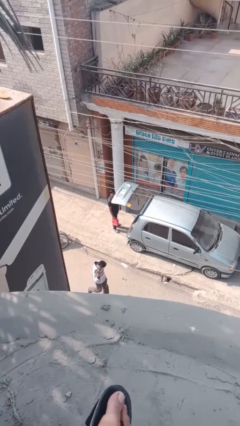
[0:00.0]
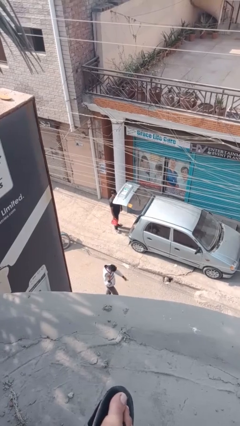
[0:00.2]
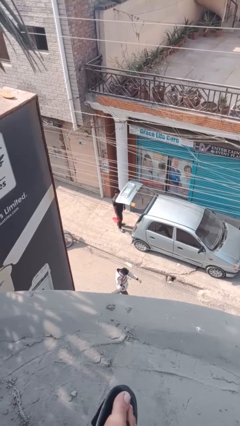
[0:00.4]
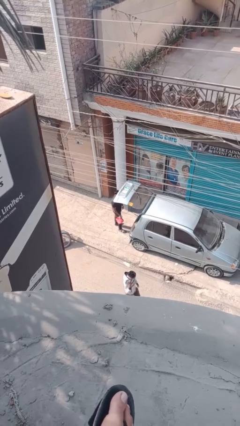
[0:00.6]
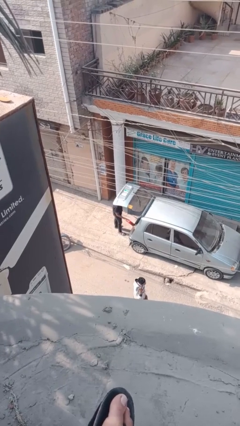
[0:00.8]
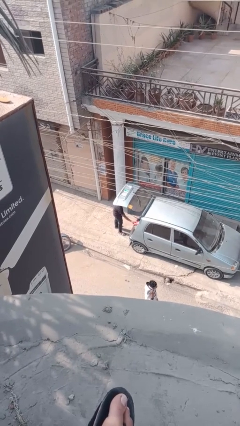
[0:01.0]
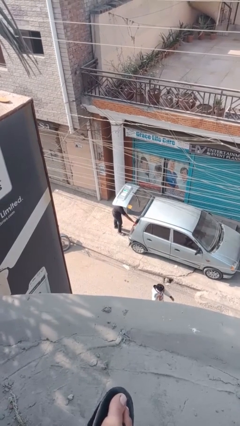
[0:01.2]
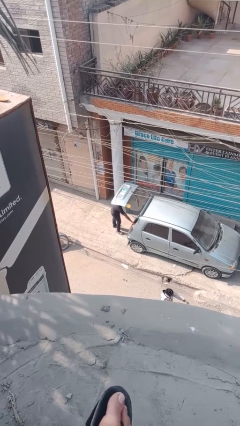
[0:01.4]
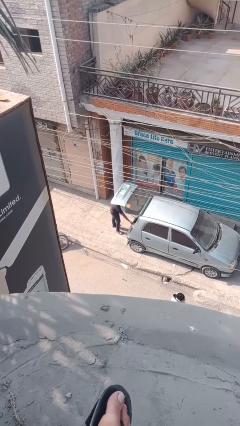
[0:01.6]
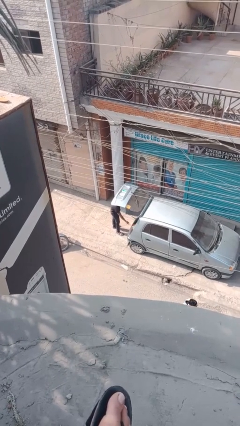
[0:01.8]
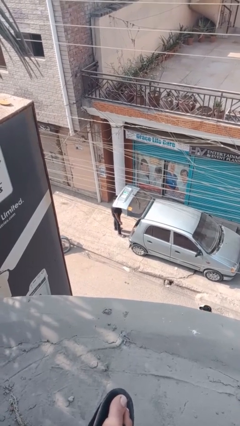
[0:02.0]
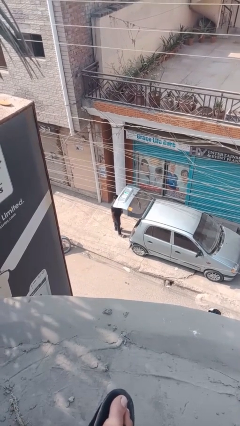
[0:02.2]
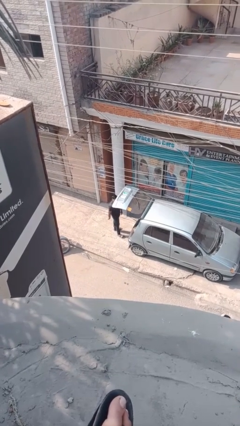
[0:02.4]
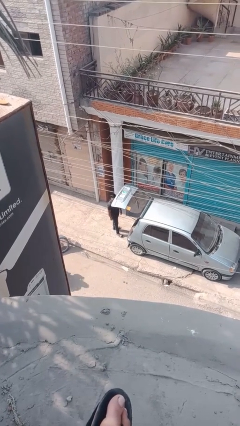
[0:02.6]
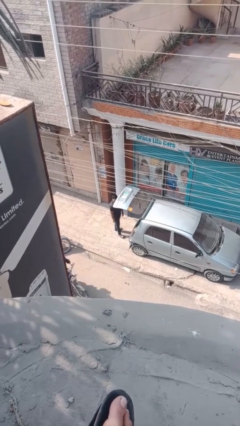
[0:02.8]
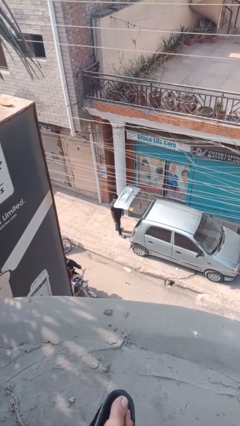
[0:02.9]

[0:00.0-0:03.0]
person loads car

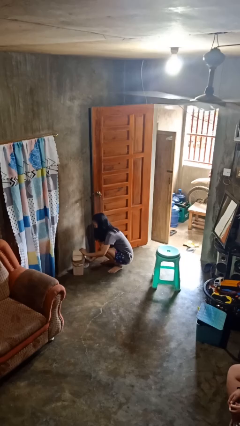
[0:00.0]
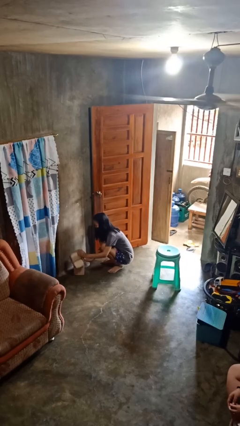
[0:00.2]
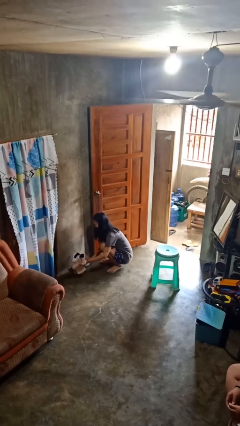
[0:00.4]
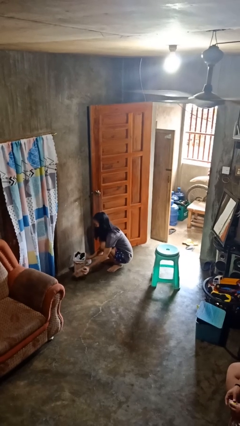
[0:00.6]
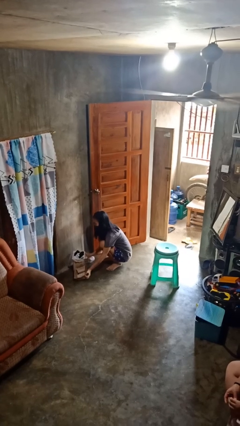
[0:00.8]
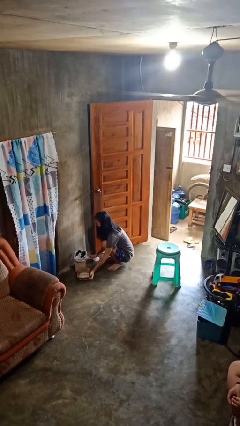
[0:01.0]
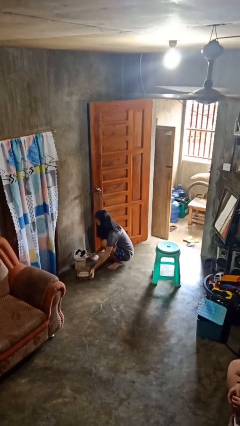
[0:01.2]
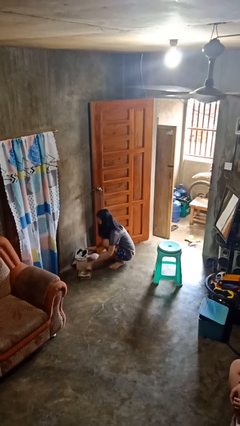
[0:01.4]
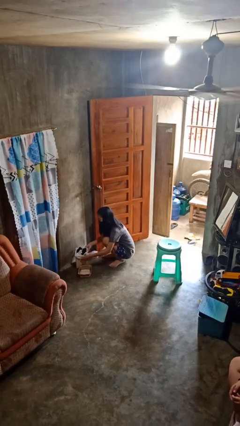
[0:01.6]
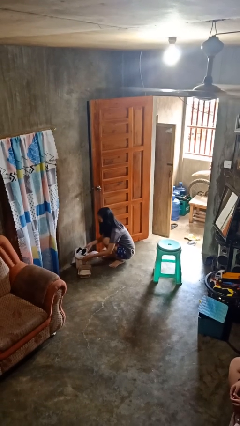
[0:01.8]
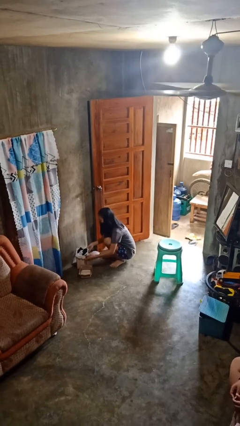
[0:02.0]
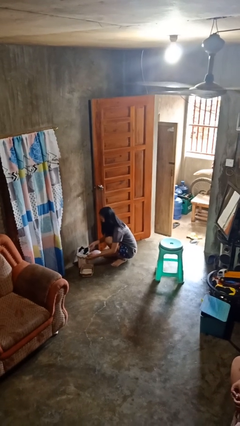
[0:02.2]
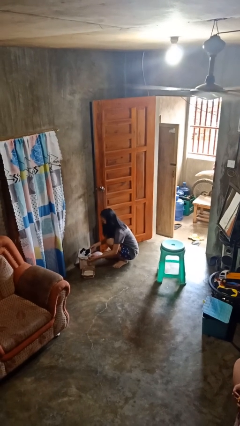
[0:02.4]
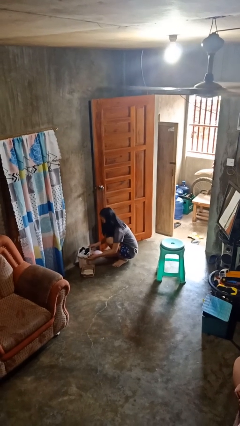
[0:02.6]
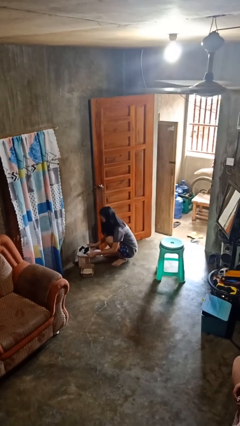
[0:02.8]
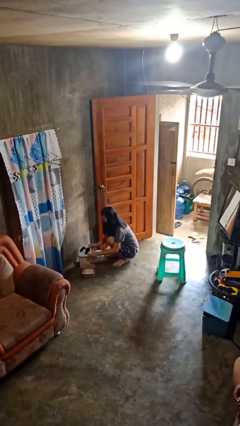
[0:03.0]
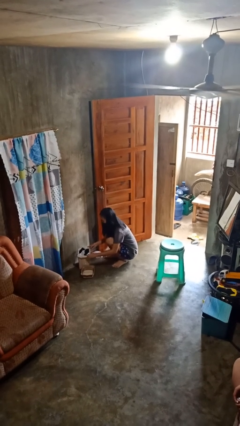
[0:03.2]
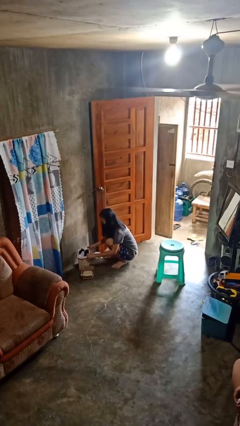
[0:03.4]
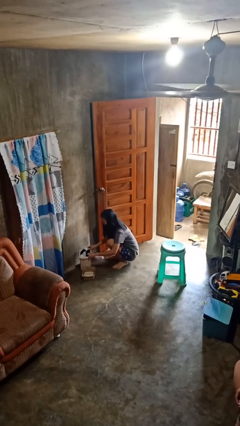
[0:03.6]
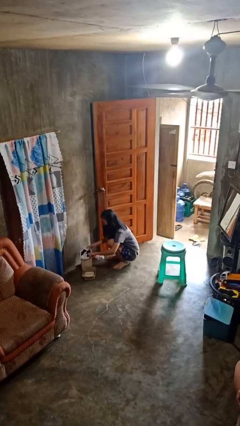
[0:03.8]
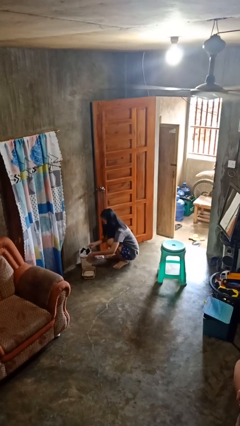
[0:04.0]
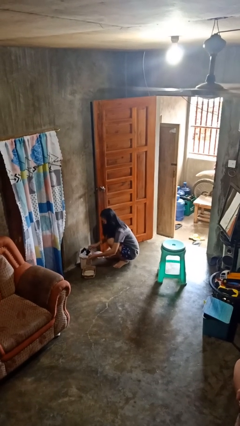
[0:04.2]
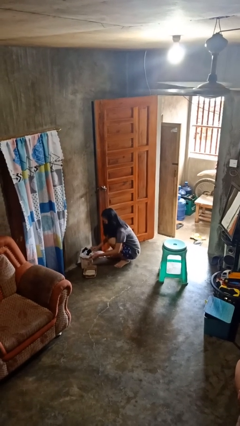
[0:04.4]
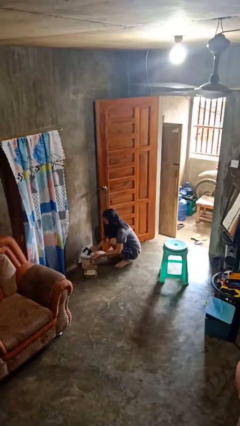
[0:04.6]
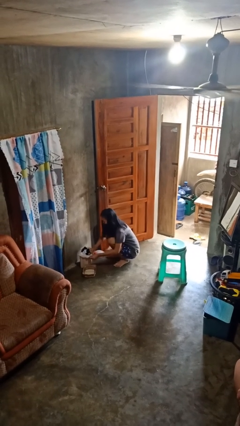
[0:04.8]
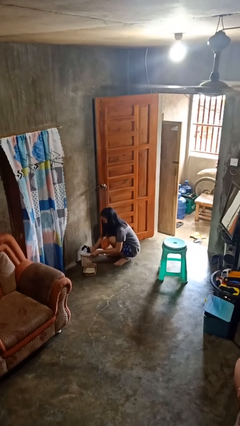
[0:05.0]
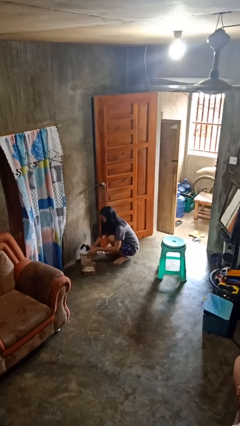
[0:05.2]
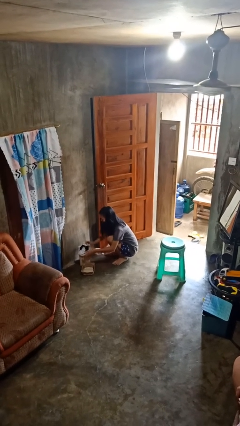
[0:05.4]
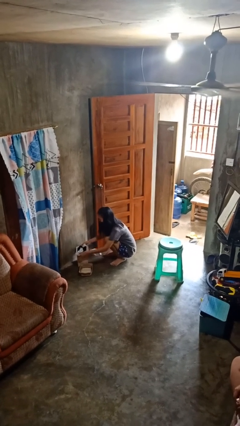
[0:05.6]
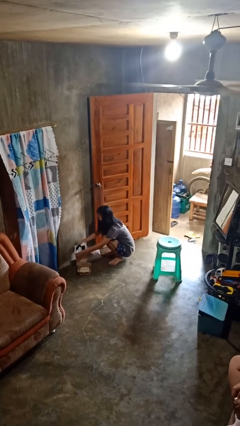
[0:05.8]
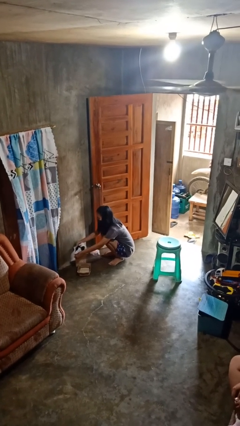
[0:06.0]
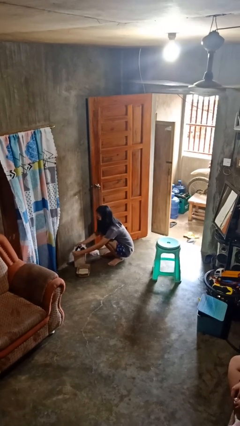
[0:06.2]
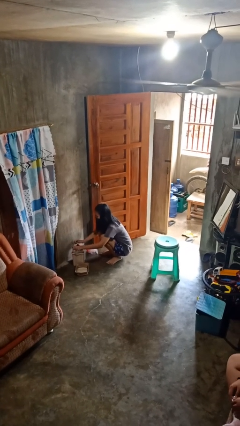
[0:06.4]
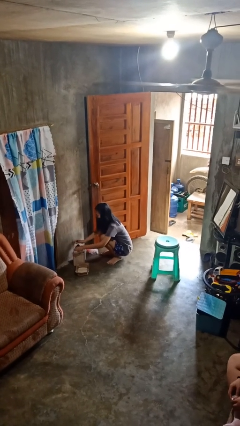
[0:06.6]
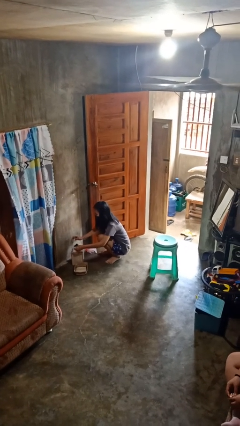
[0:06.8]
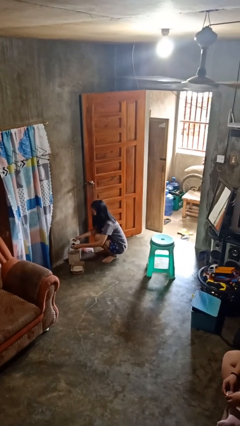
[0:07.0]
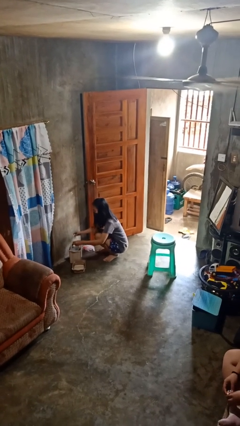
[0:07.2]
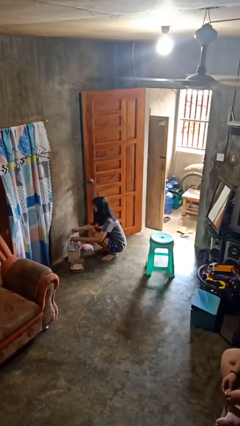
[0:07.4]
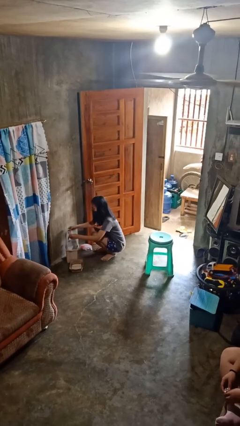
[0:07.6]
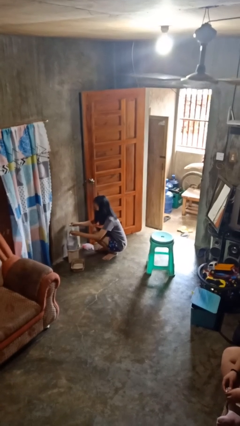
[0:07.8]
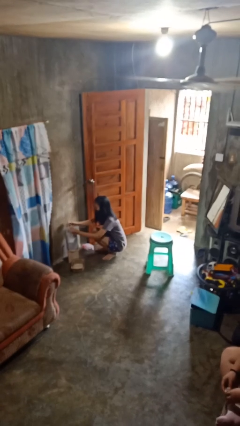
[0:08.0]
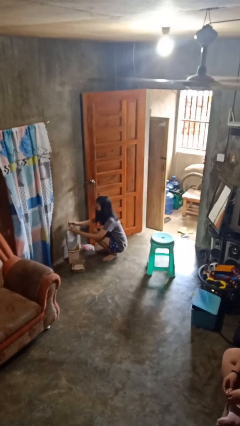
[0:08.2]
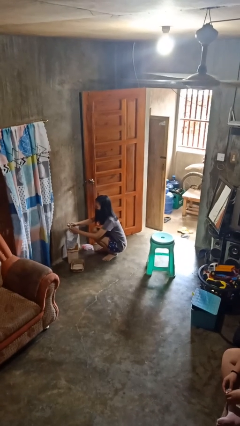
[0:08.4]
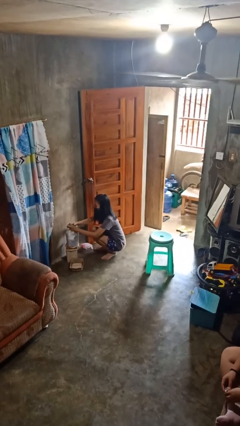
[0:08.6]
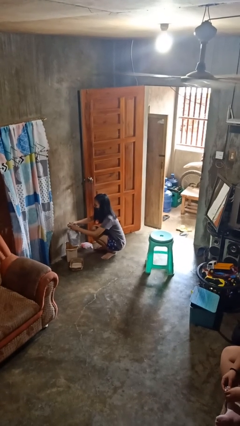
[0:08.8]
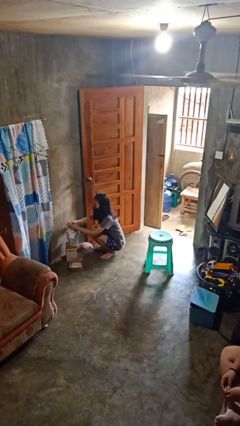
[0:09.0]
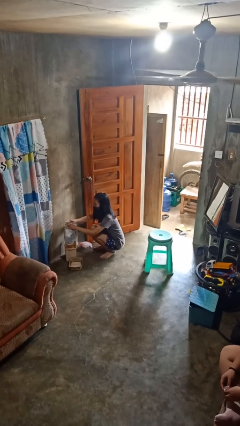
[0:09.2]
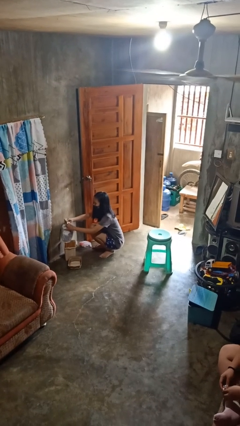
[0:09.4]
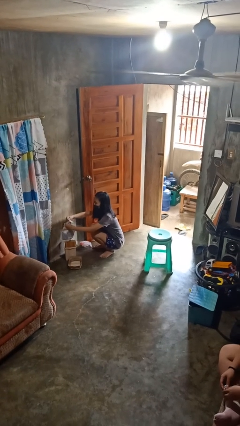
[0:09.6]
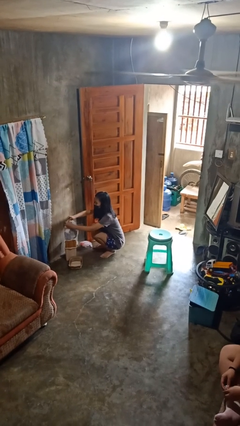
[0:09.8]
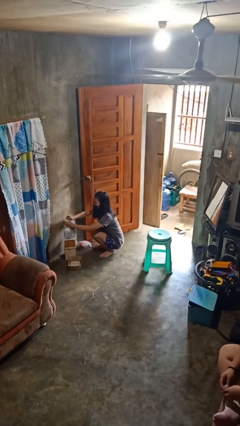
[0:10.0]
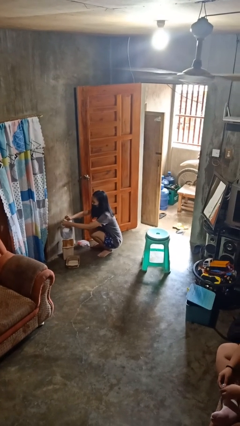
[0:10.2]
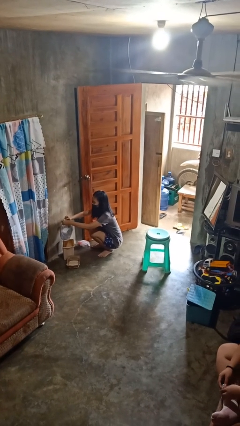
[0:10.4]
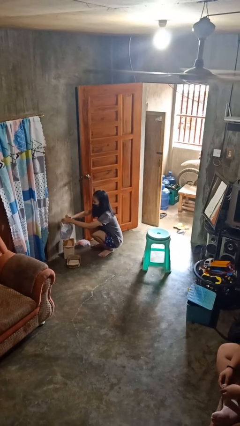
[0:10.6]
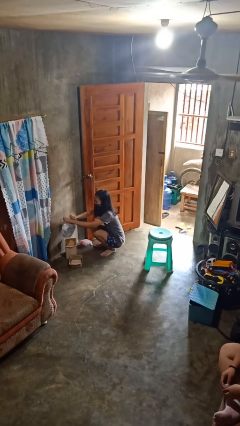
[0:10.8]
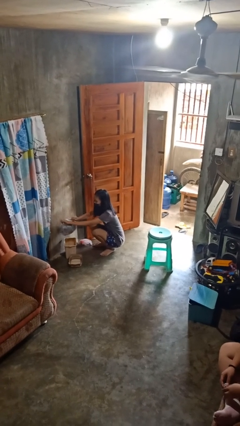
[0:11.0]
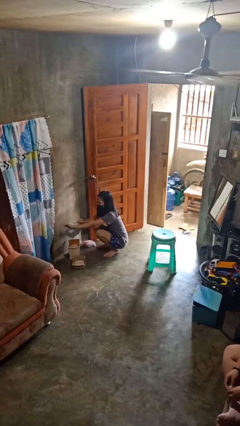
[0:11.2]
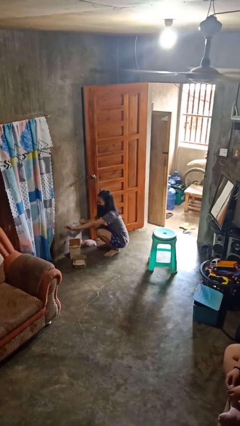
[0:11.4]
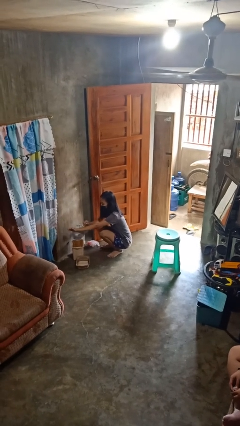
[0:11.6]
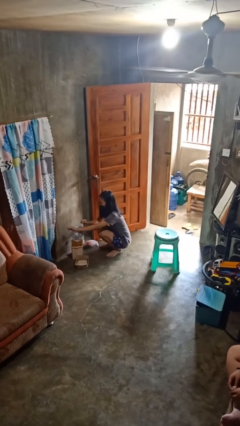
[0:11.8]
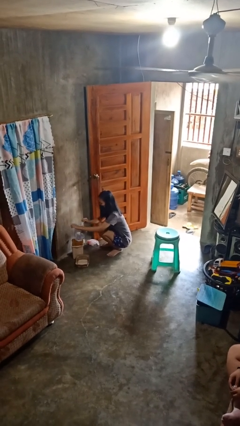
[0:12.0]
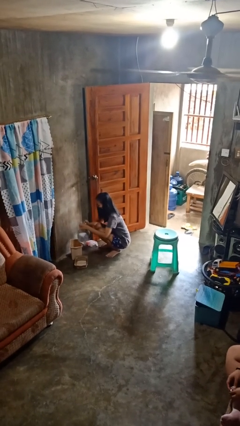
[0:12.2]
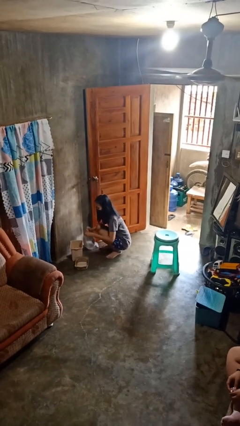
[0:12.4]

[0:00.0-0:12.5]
person removes trashbag from trashcan

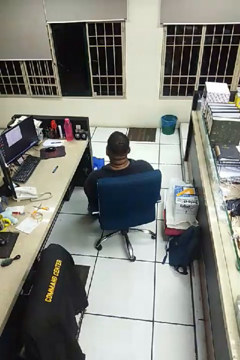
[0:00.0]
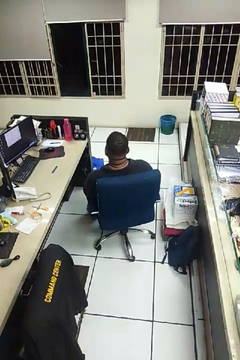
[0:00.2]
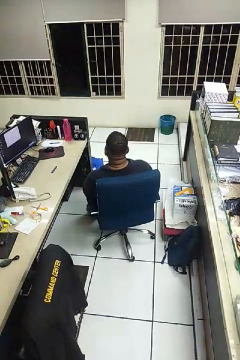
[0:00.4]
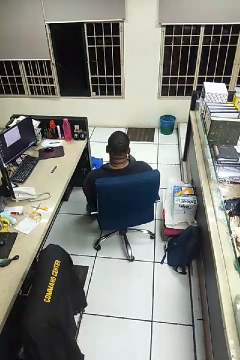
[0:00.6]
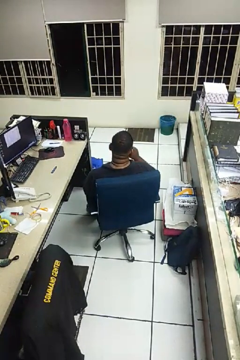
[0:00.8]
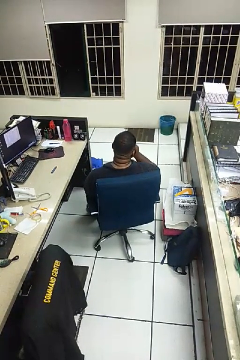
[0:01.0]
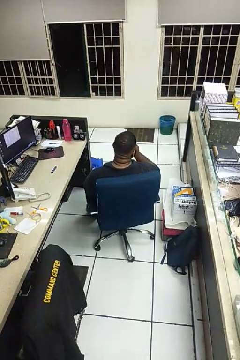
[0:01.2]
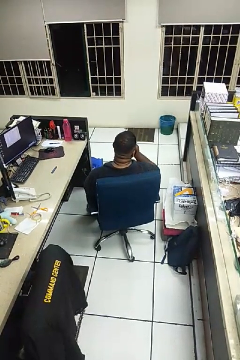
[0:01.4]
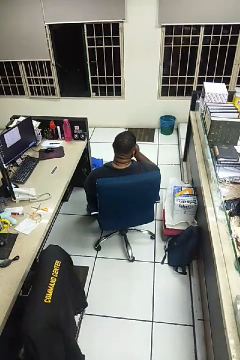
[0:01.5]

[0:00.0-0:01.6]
person gestures be quiet

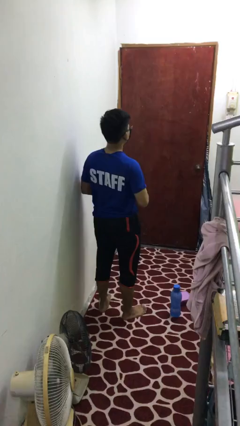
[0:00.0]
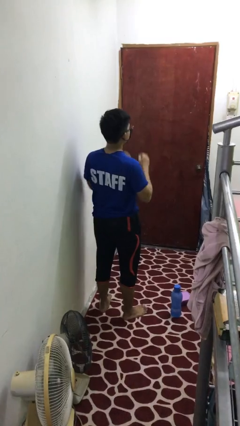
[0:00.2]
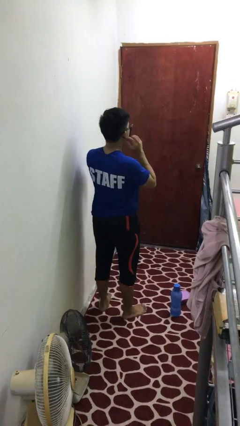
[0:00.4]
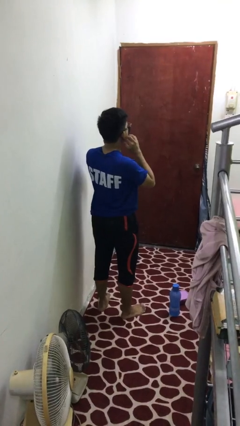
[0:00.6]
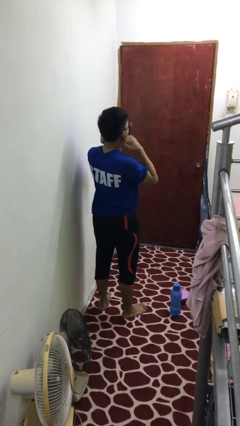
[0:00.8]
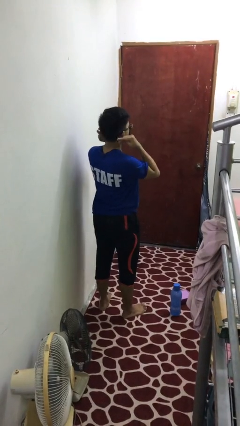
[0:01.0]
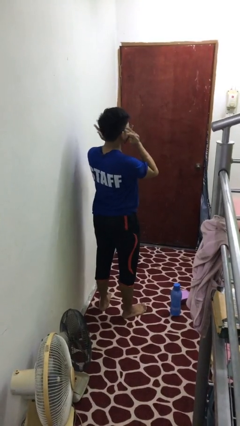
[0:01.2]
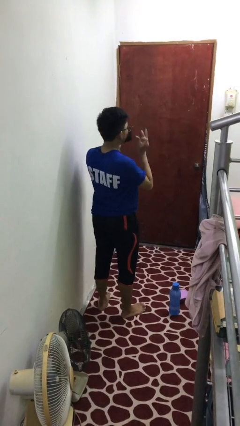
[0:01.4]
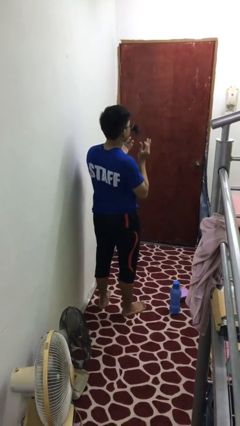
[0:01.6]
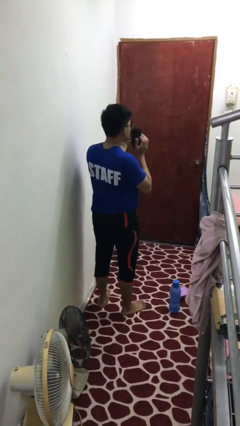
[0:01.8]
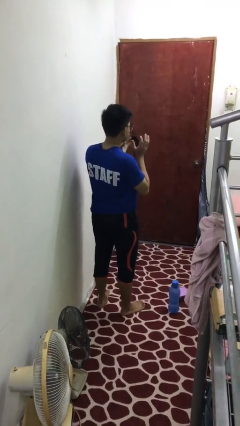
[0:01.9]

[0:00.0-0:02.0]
person takes off facemask
